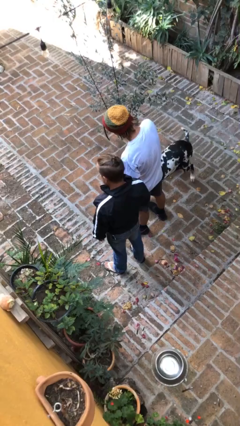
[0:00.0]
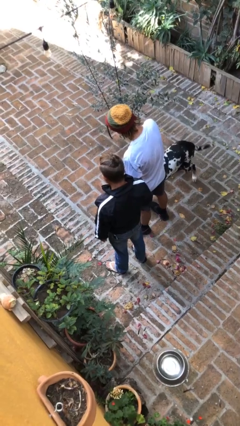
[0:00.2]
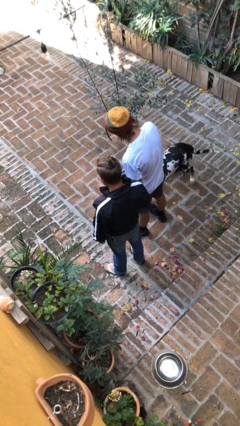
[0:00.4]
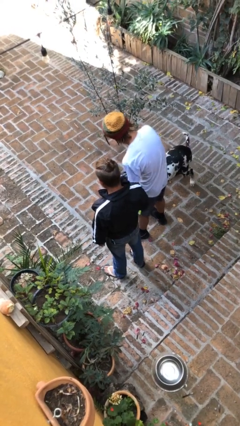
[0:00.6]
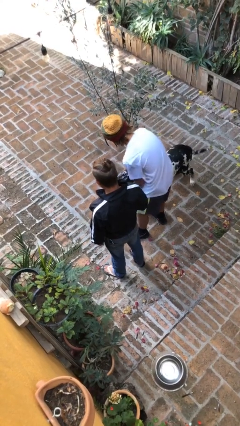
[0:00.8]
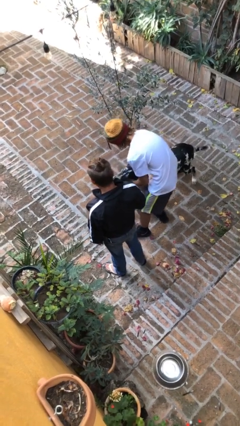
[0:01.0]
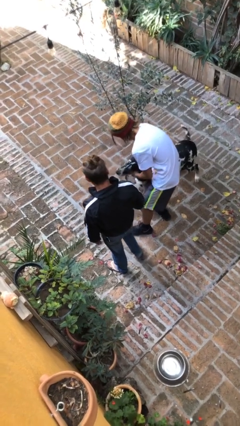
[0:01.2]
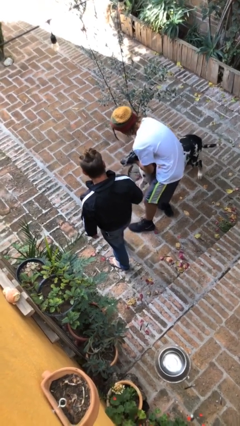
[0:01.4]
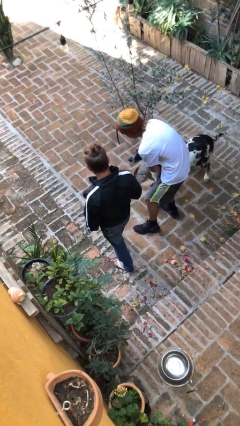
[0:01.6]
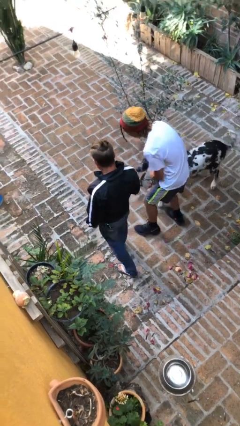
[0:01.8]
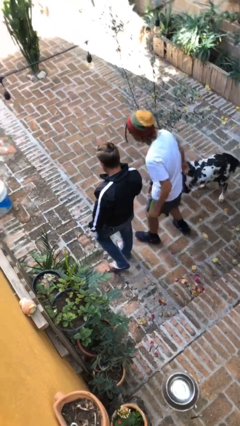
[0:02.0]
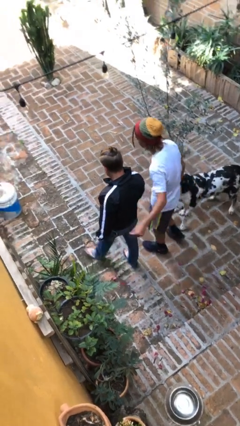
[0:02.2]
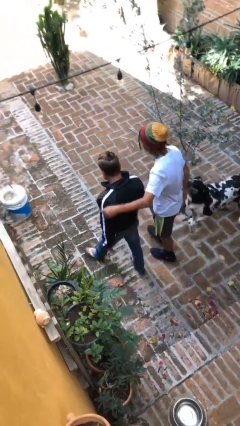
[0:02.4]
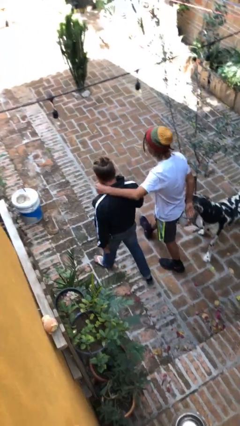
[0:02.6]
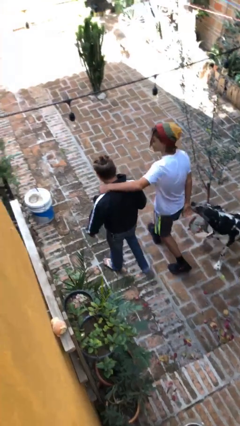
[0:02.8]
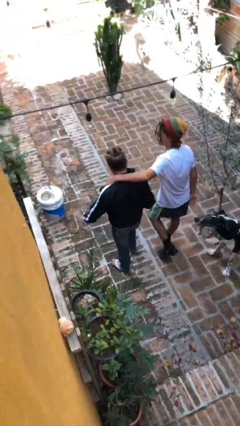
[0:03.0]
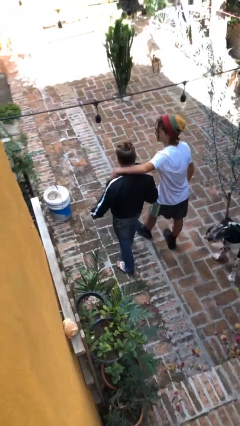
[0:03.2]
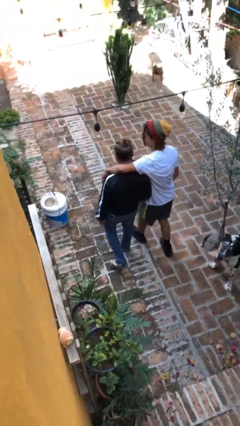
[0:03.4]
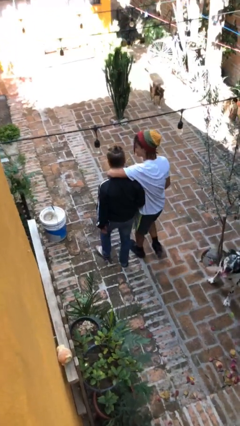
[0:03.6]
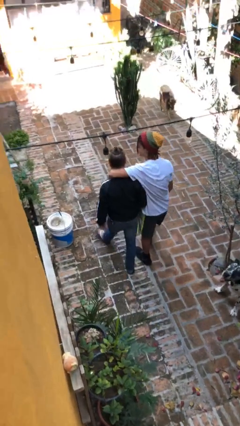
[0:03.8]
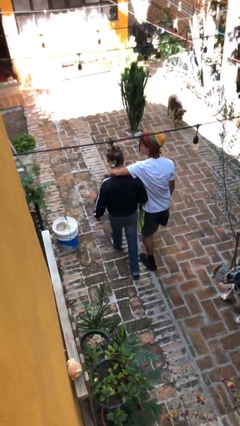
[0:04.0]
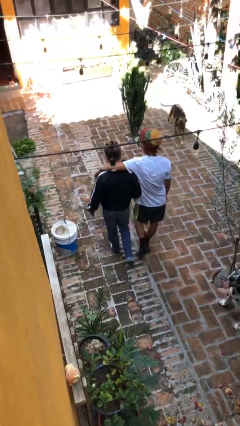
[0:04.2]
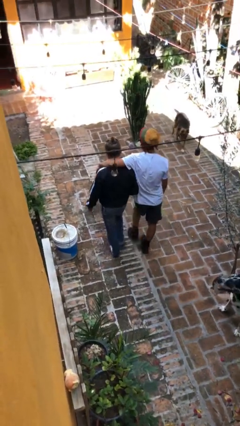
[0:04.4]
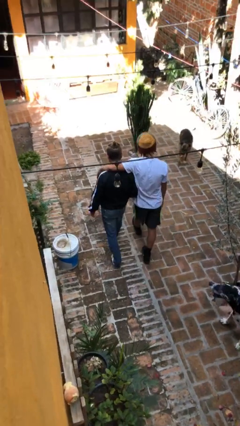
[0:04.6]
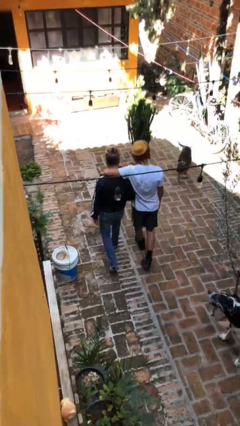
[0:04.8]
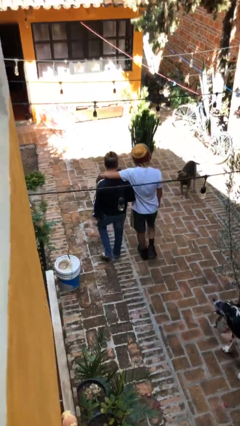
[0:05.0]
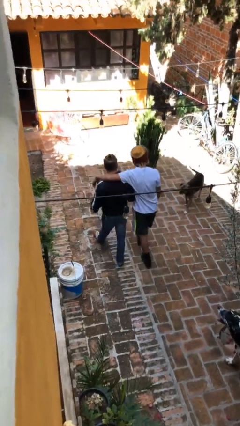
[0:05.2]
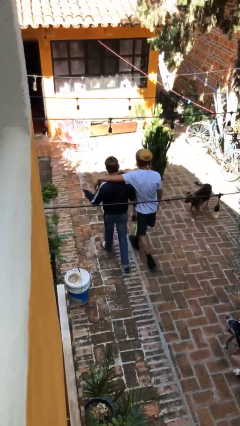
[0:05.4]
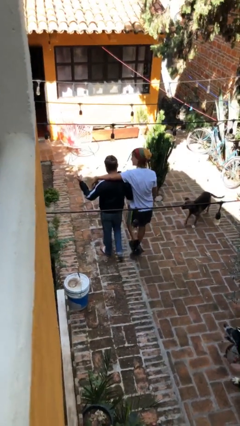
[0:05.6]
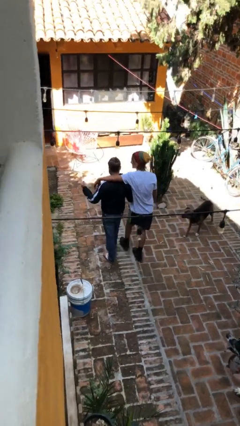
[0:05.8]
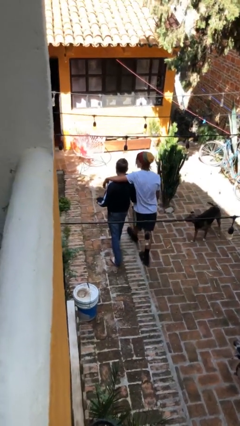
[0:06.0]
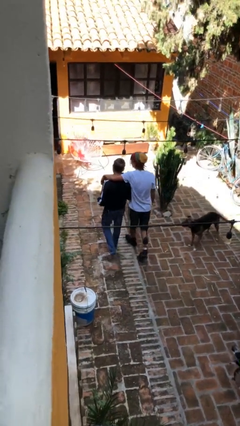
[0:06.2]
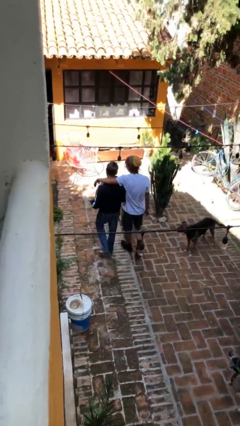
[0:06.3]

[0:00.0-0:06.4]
person talks to person

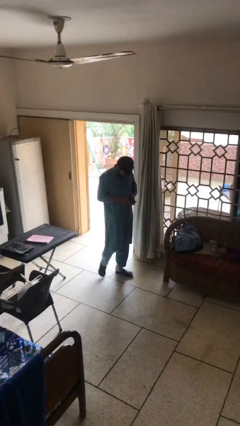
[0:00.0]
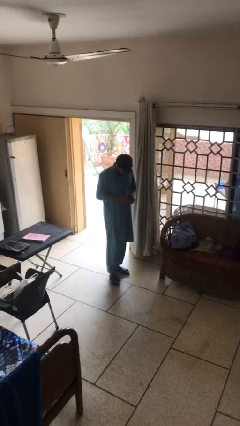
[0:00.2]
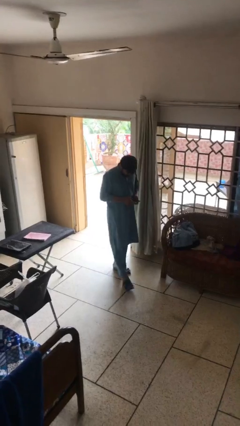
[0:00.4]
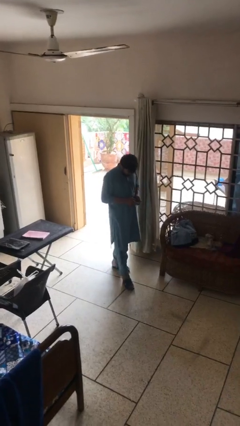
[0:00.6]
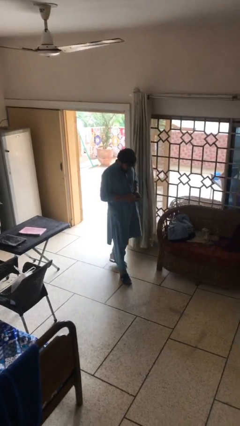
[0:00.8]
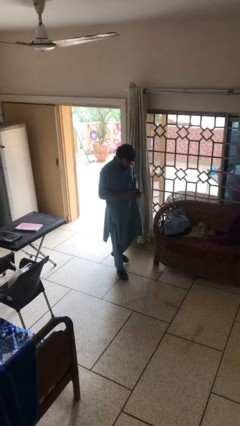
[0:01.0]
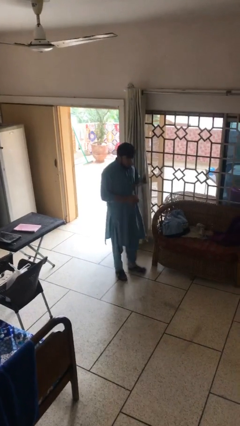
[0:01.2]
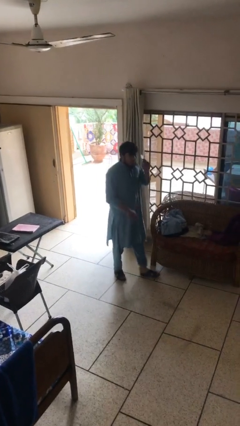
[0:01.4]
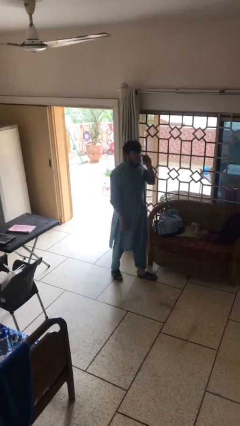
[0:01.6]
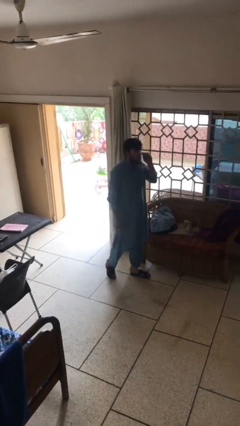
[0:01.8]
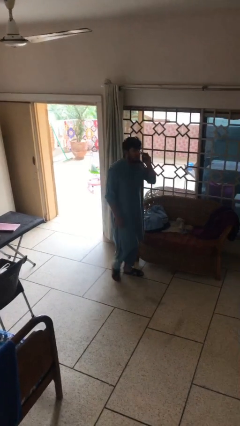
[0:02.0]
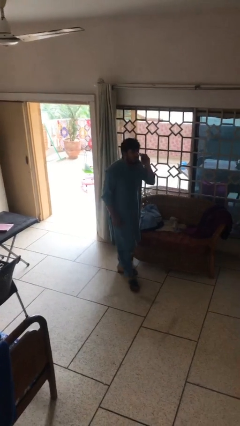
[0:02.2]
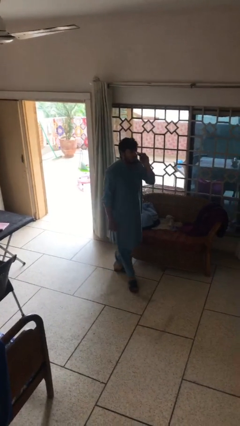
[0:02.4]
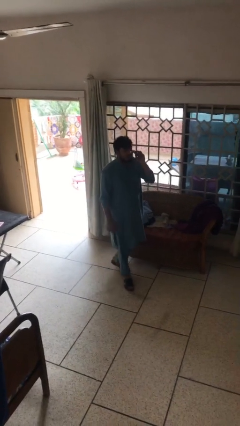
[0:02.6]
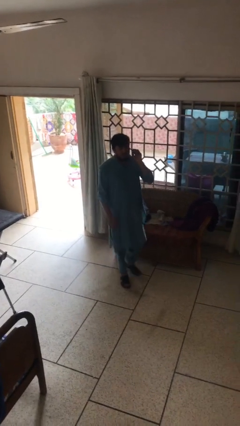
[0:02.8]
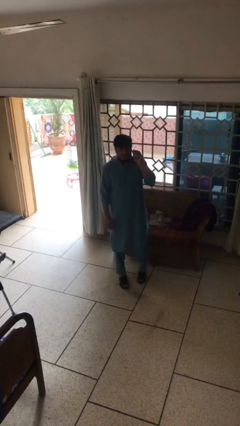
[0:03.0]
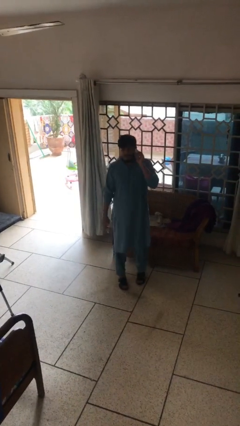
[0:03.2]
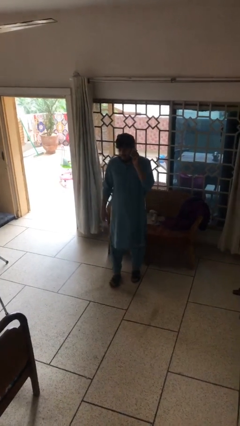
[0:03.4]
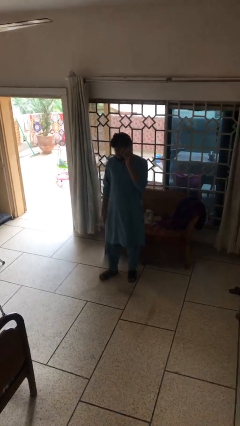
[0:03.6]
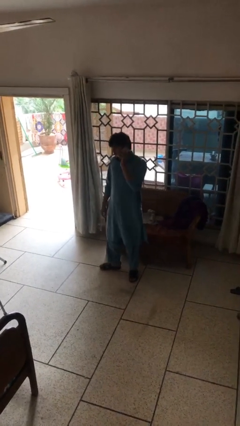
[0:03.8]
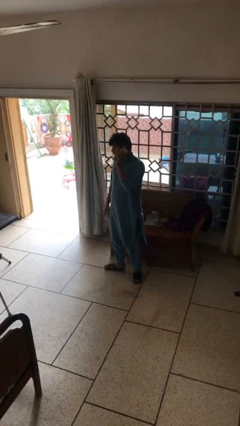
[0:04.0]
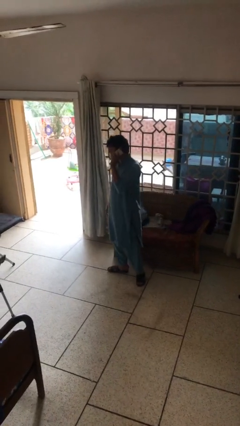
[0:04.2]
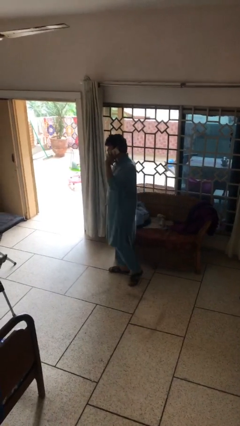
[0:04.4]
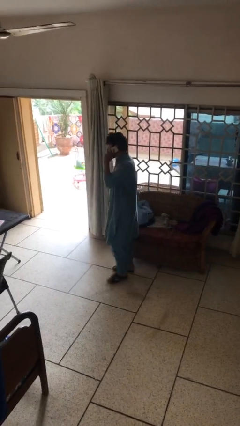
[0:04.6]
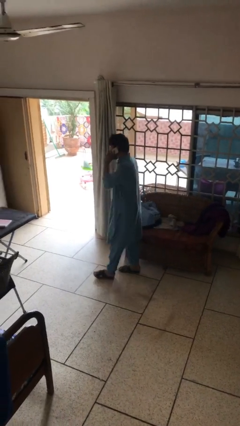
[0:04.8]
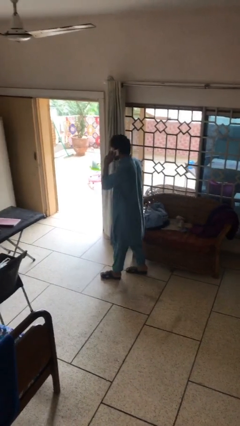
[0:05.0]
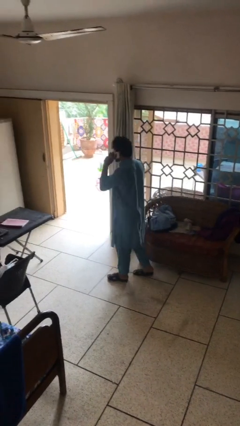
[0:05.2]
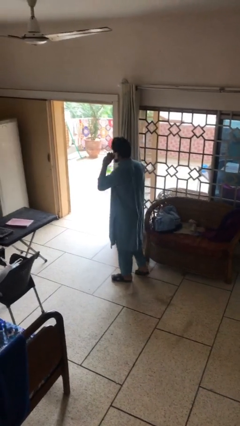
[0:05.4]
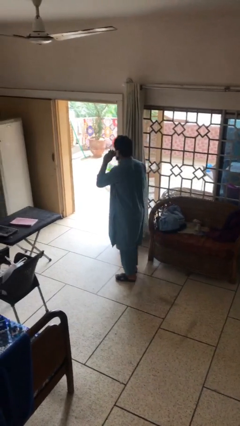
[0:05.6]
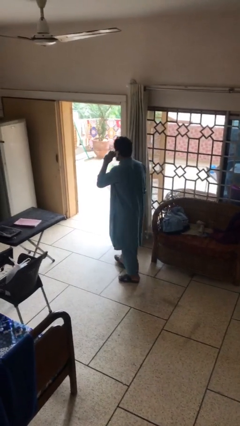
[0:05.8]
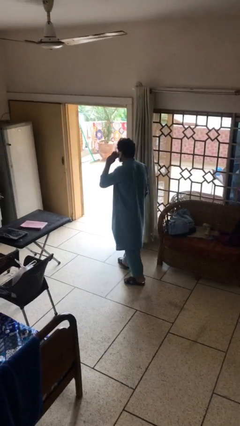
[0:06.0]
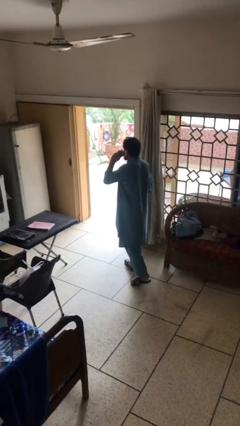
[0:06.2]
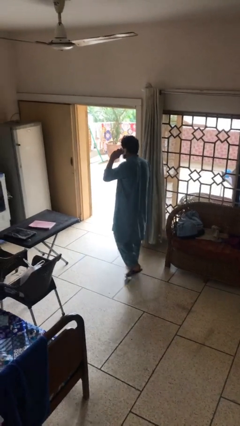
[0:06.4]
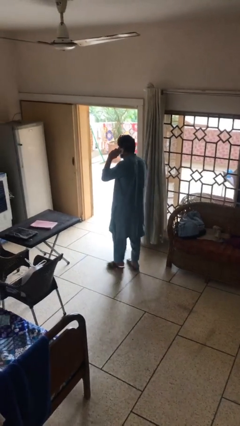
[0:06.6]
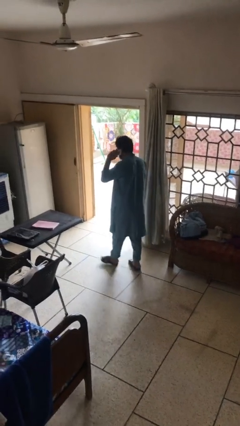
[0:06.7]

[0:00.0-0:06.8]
person talks on phone

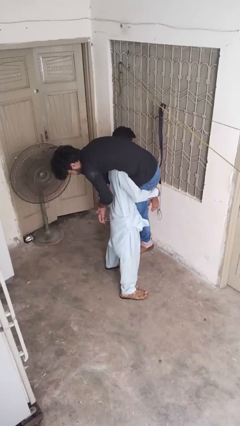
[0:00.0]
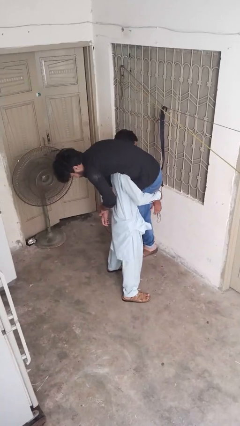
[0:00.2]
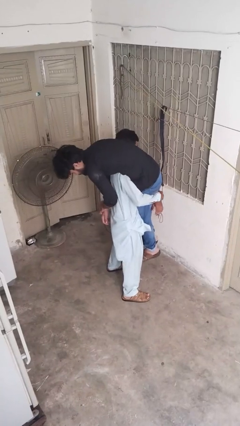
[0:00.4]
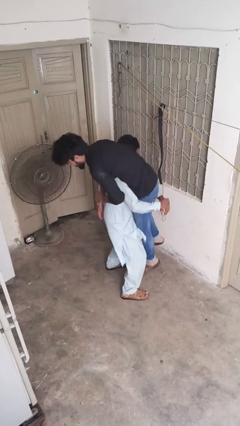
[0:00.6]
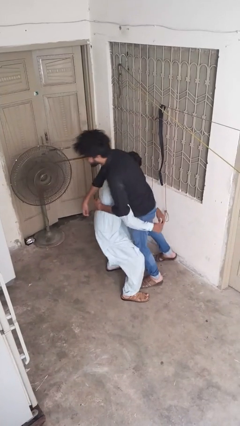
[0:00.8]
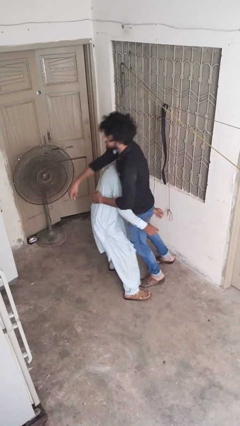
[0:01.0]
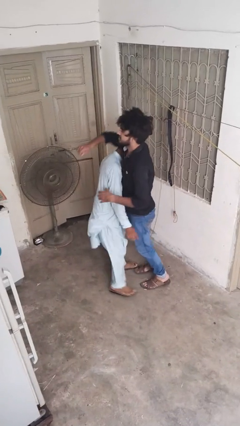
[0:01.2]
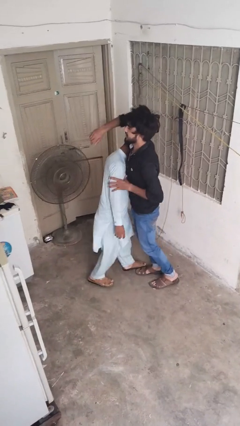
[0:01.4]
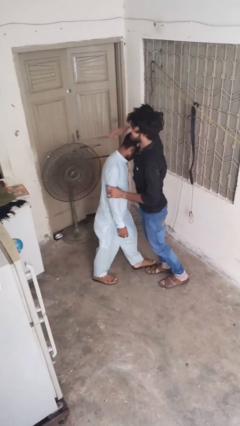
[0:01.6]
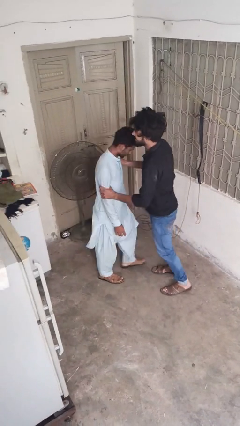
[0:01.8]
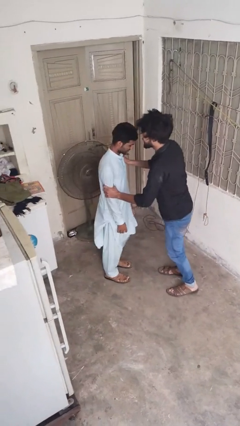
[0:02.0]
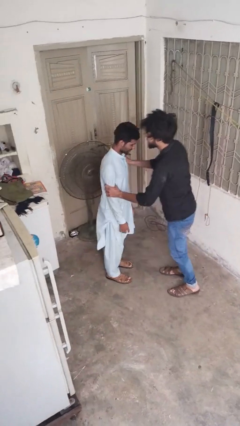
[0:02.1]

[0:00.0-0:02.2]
person puts down person

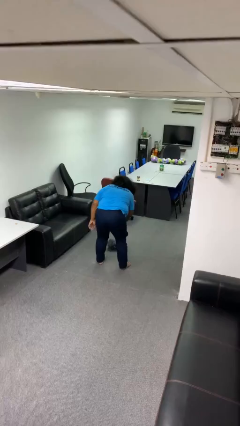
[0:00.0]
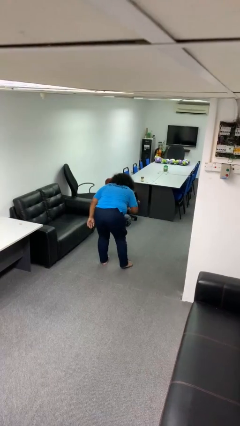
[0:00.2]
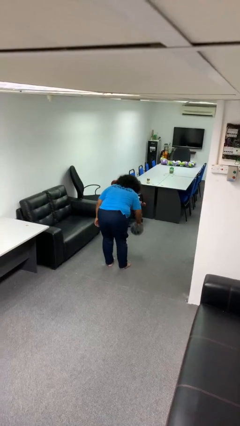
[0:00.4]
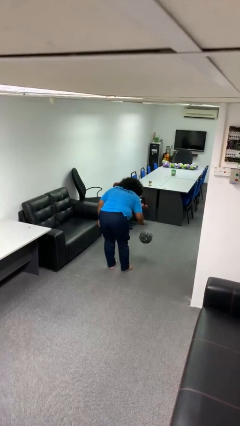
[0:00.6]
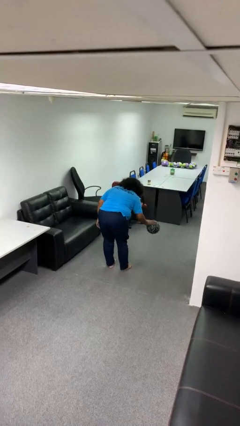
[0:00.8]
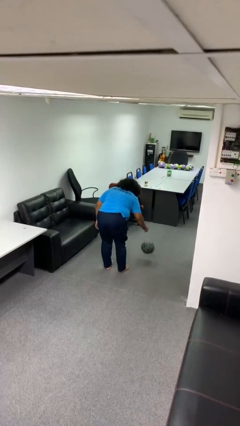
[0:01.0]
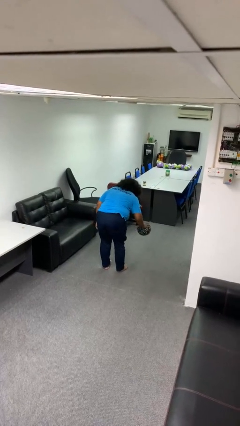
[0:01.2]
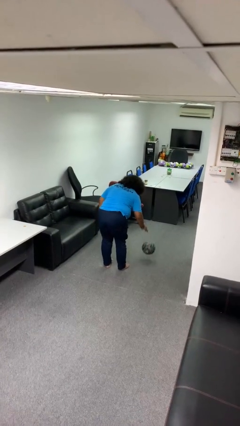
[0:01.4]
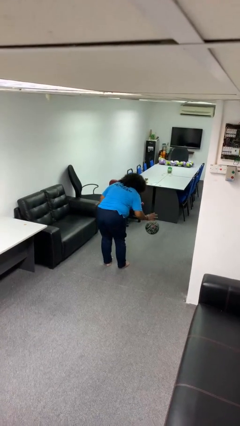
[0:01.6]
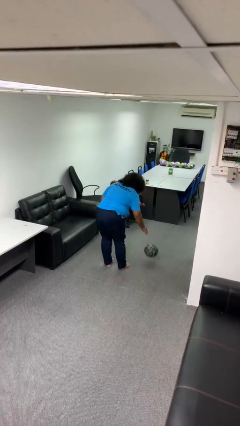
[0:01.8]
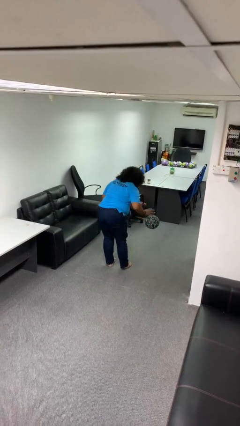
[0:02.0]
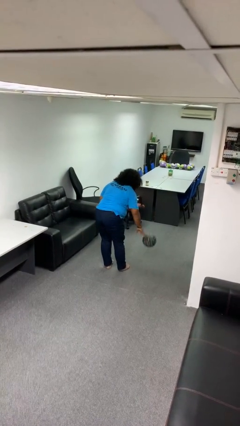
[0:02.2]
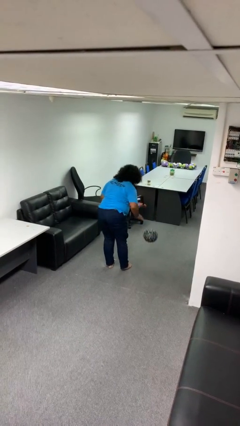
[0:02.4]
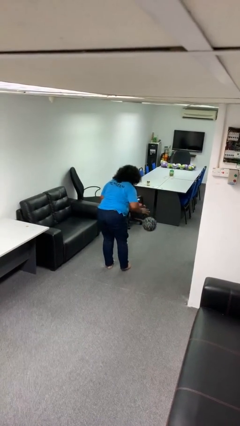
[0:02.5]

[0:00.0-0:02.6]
person bounces ball on floor
